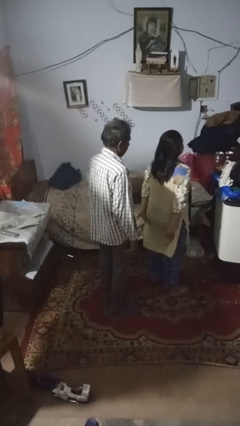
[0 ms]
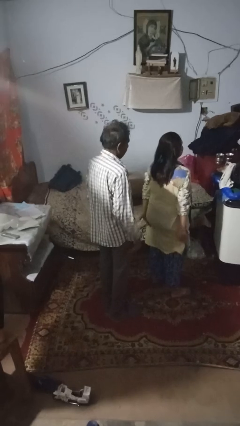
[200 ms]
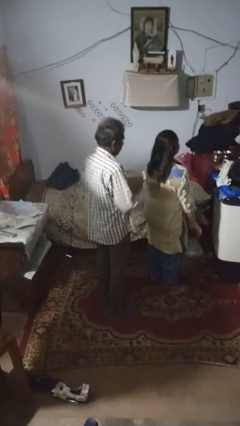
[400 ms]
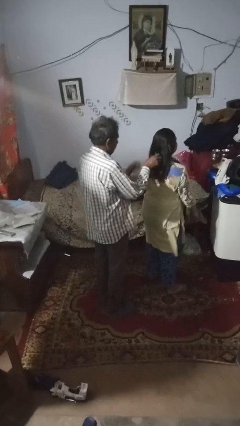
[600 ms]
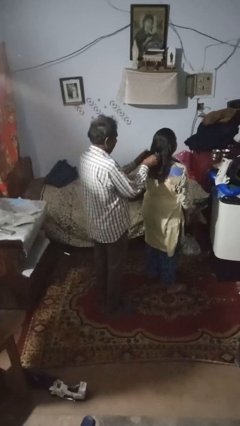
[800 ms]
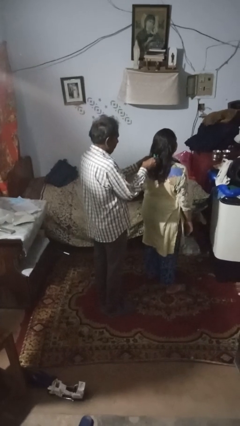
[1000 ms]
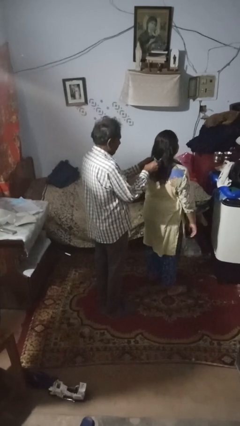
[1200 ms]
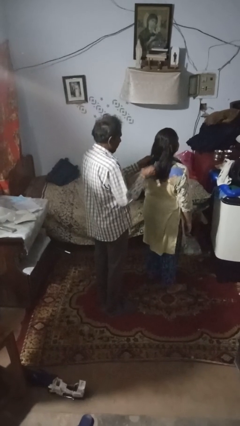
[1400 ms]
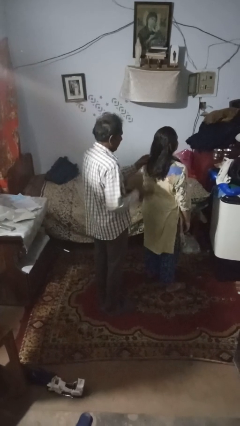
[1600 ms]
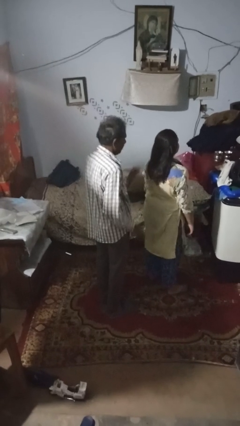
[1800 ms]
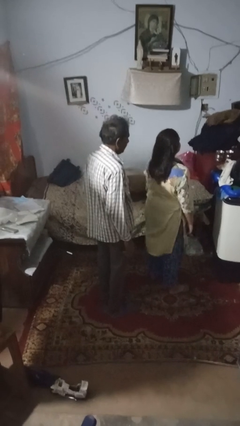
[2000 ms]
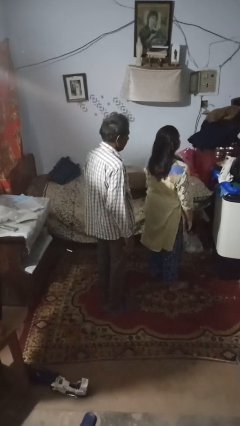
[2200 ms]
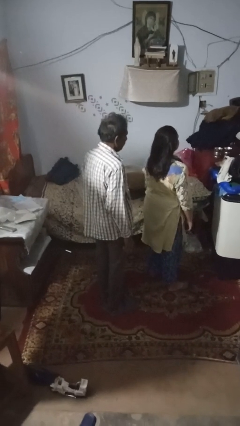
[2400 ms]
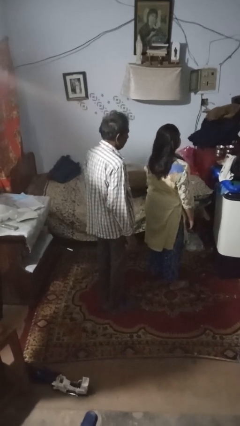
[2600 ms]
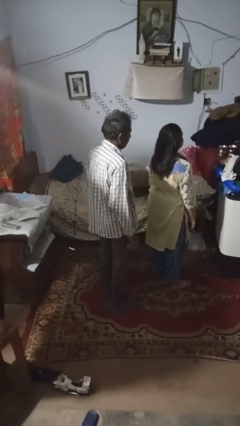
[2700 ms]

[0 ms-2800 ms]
person braids hair of person

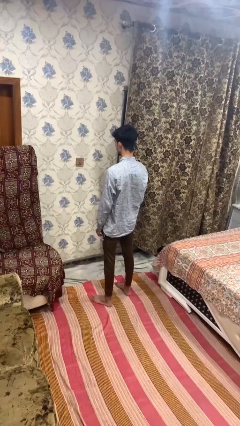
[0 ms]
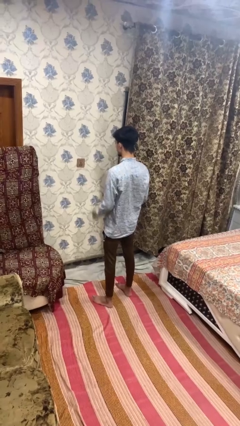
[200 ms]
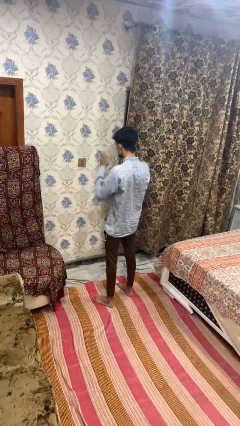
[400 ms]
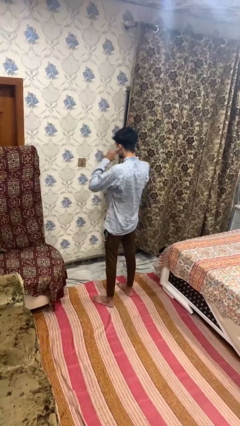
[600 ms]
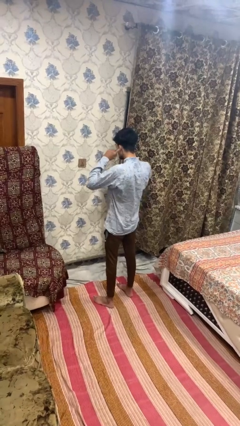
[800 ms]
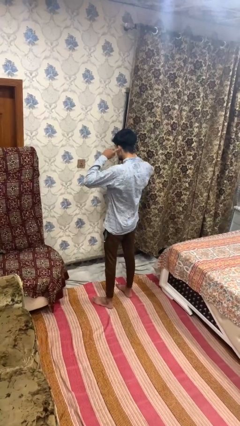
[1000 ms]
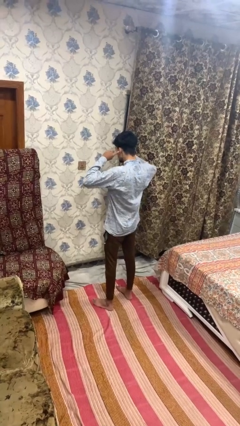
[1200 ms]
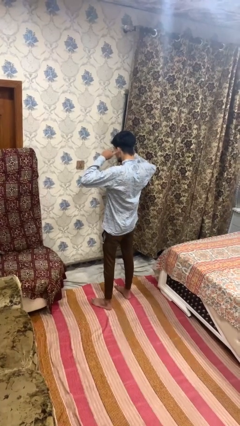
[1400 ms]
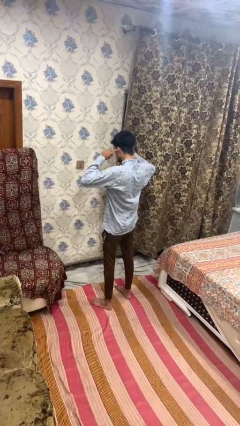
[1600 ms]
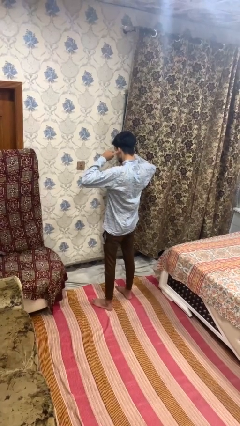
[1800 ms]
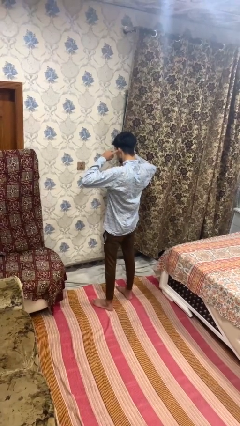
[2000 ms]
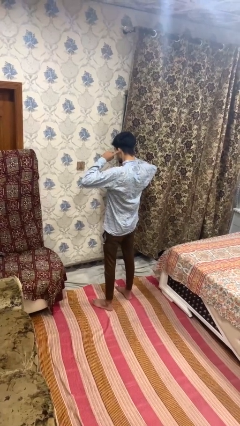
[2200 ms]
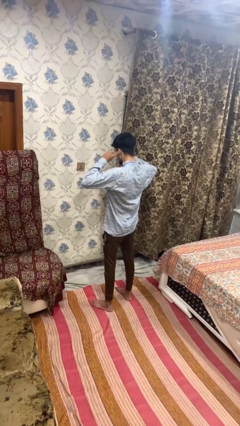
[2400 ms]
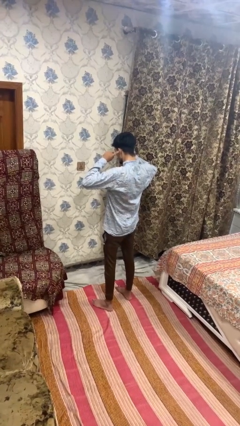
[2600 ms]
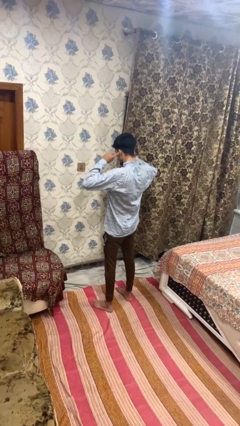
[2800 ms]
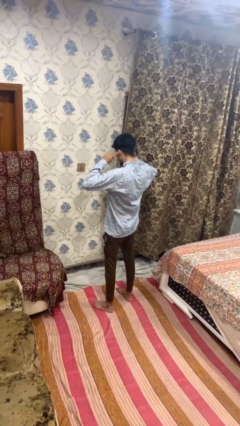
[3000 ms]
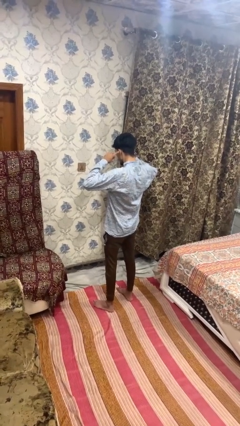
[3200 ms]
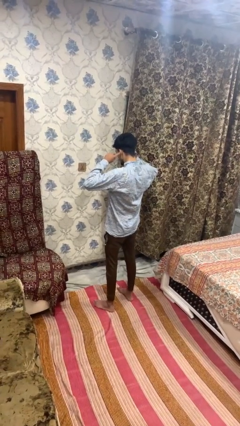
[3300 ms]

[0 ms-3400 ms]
person puts fingers in ear

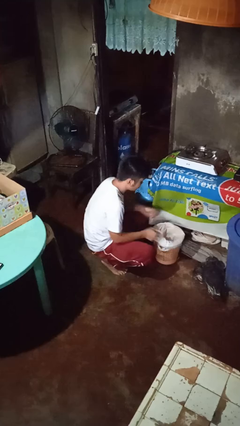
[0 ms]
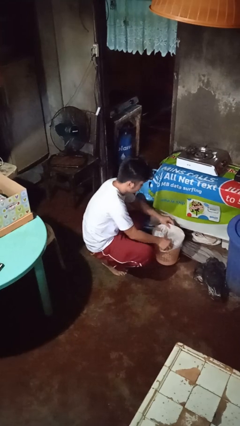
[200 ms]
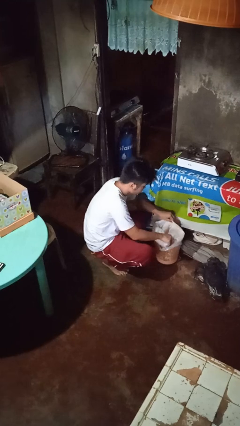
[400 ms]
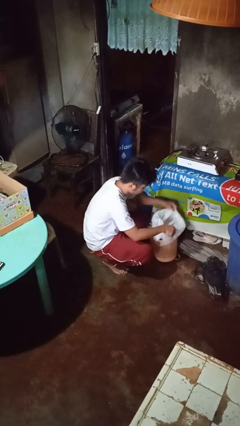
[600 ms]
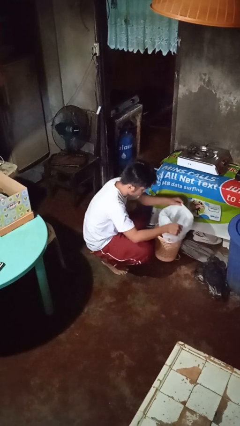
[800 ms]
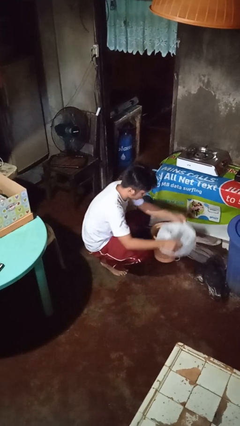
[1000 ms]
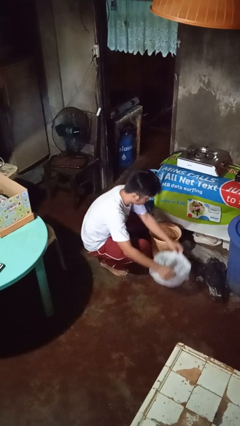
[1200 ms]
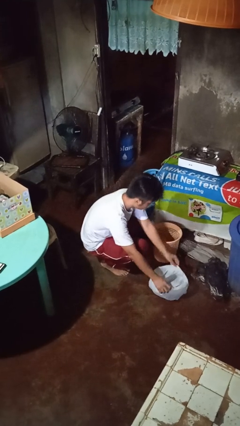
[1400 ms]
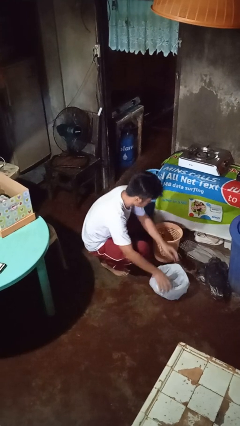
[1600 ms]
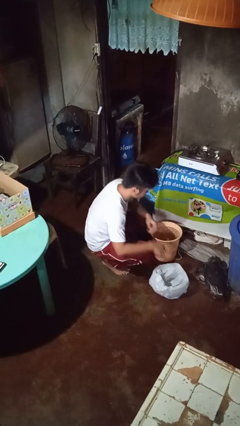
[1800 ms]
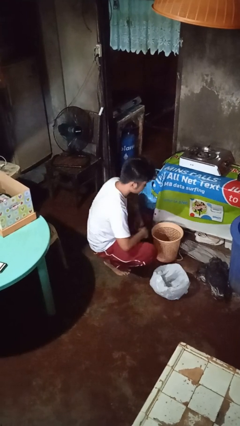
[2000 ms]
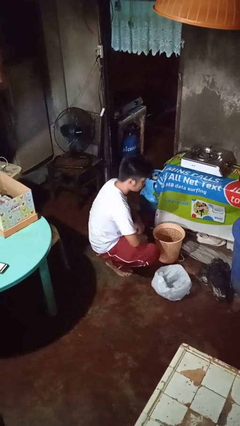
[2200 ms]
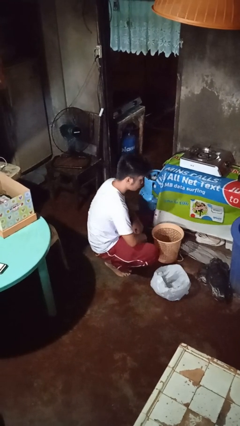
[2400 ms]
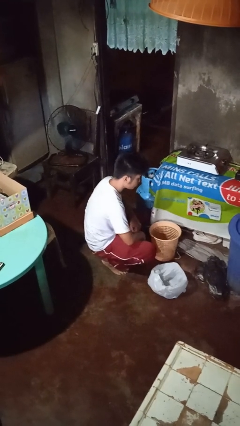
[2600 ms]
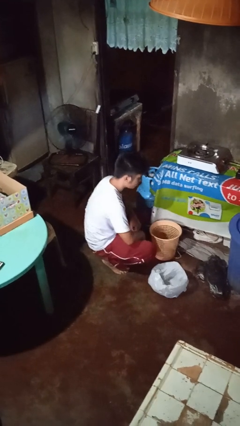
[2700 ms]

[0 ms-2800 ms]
person removes trashbag from trashcan

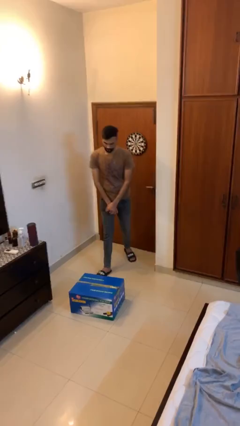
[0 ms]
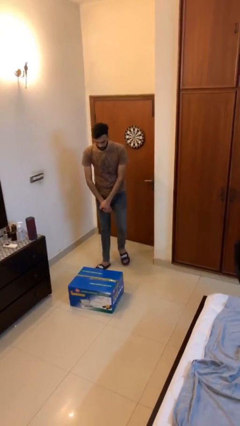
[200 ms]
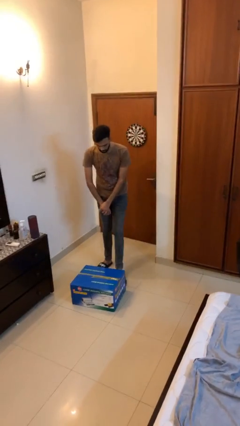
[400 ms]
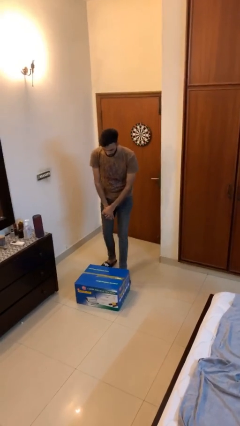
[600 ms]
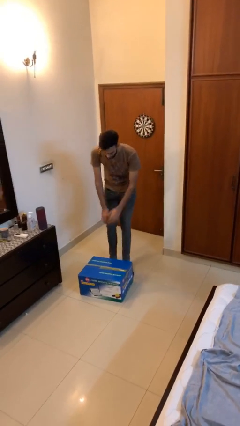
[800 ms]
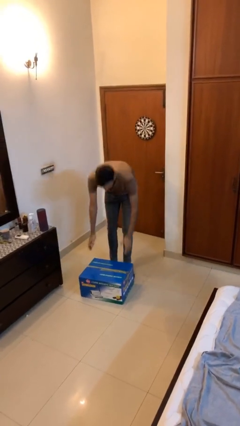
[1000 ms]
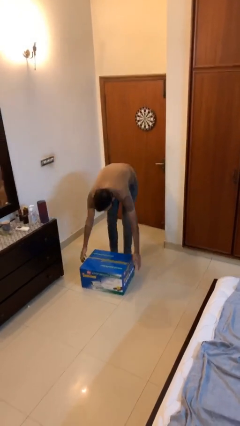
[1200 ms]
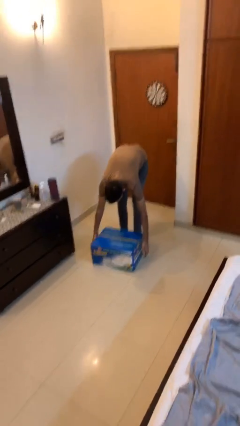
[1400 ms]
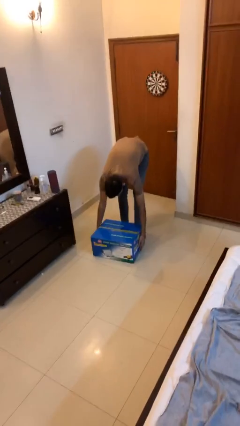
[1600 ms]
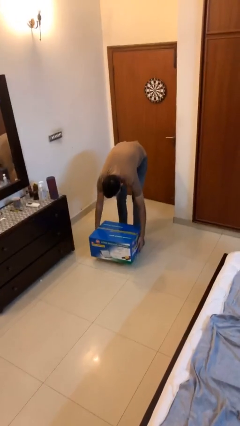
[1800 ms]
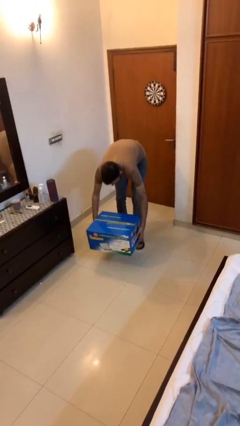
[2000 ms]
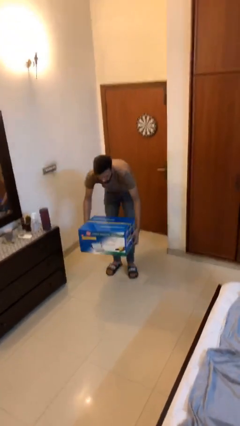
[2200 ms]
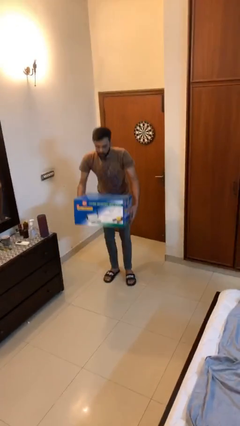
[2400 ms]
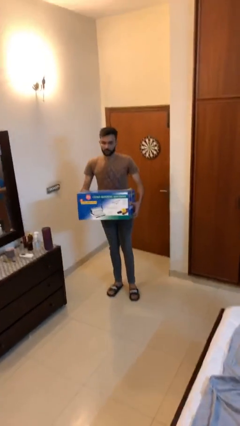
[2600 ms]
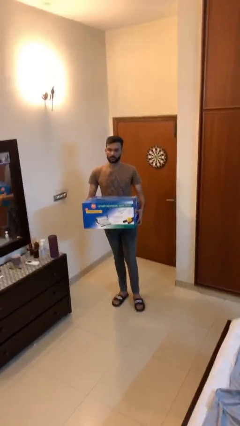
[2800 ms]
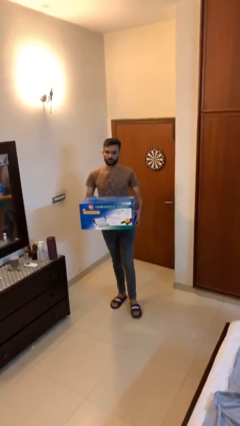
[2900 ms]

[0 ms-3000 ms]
person carries heavy object

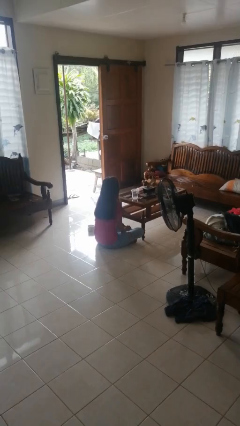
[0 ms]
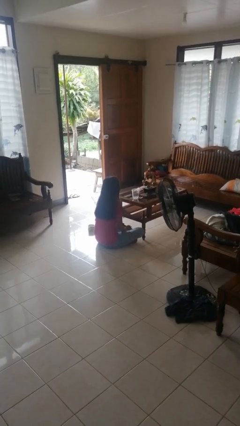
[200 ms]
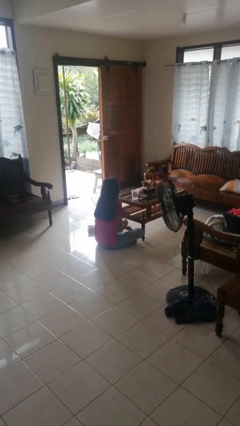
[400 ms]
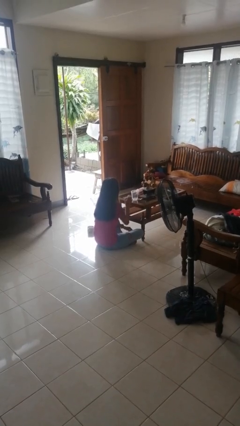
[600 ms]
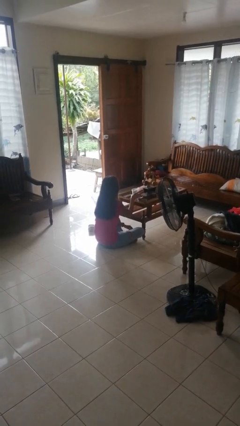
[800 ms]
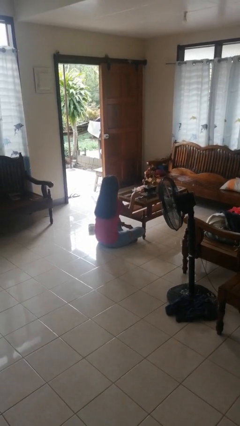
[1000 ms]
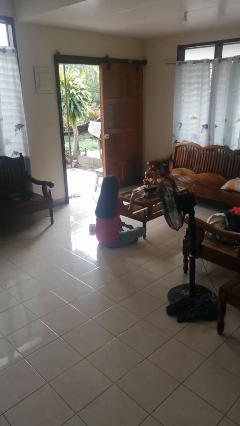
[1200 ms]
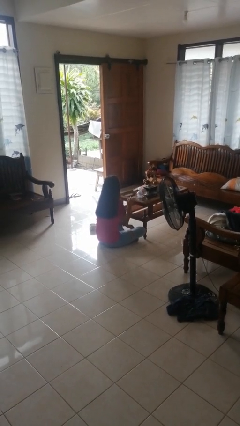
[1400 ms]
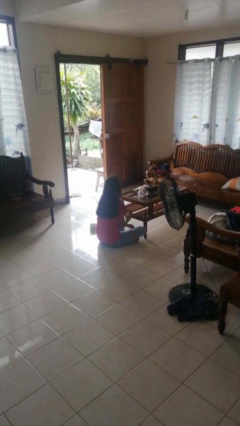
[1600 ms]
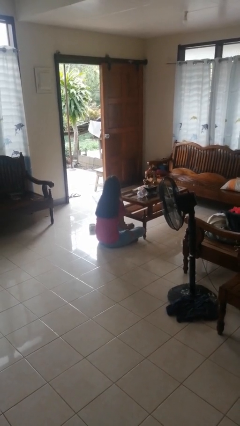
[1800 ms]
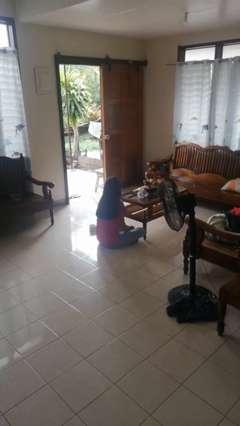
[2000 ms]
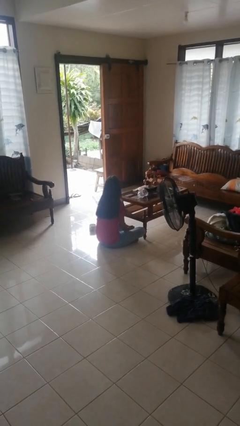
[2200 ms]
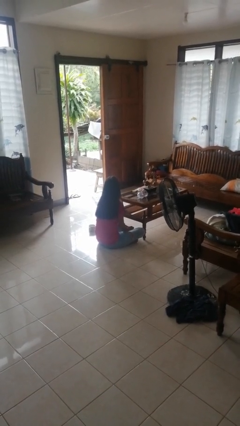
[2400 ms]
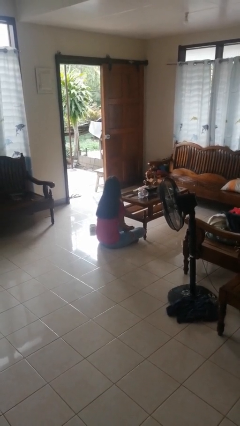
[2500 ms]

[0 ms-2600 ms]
person knocks over glass

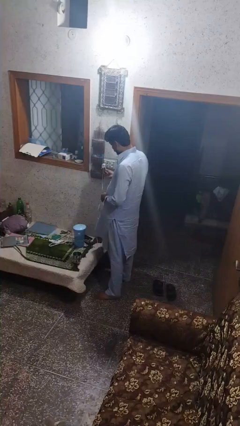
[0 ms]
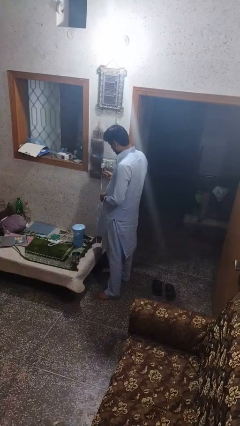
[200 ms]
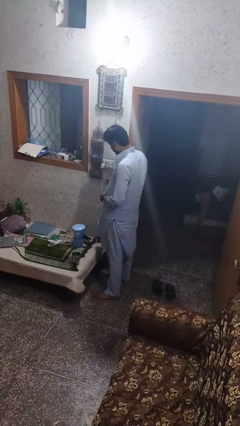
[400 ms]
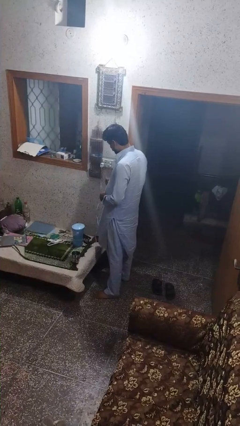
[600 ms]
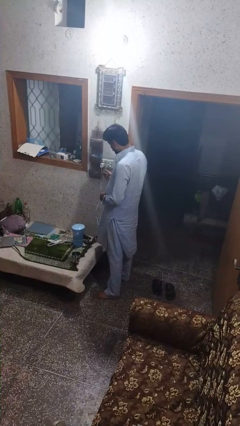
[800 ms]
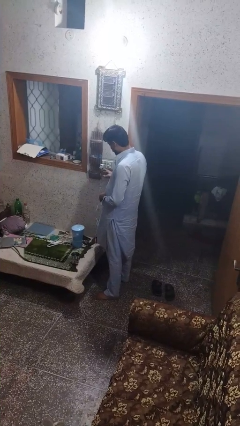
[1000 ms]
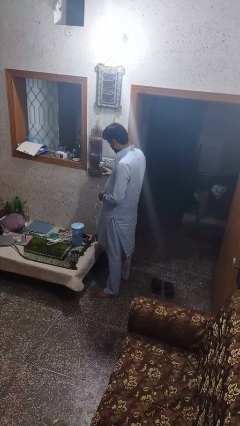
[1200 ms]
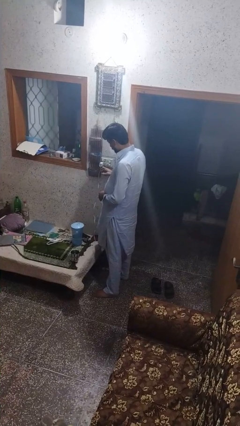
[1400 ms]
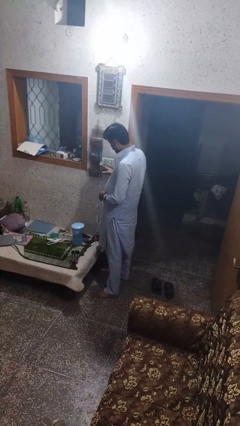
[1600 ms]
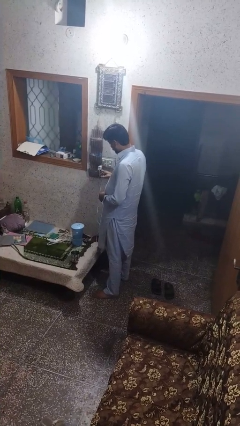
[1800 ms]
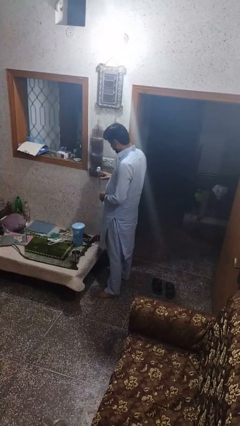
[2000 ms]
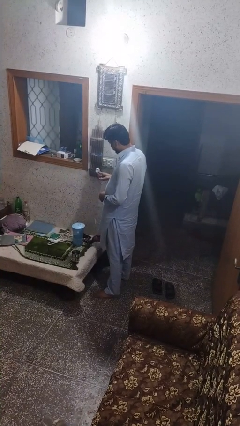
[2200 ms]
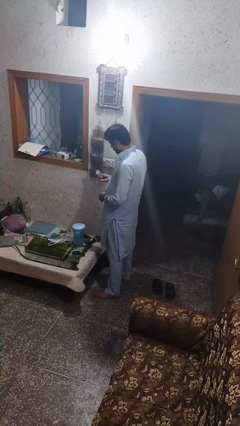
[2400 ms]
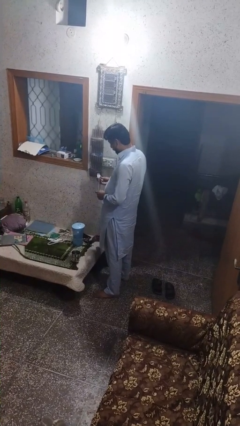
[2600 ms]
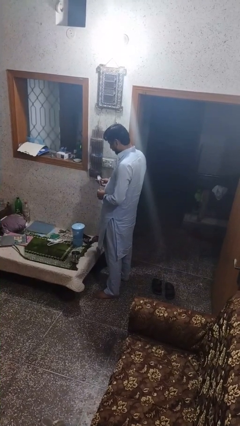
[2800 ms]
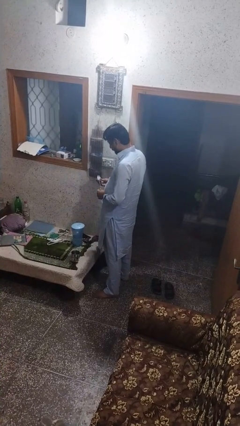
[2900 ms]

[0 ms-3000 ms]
person unplugs from electrical socket
